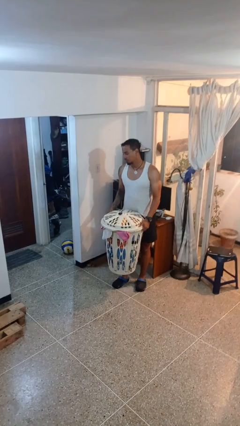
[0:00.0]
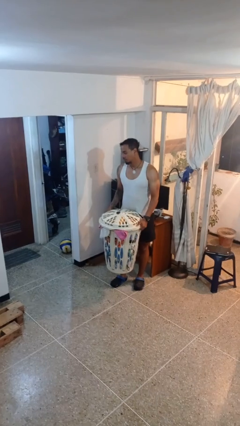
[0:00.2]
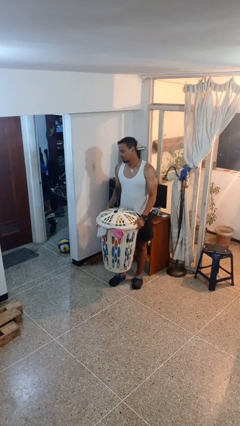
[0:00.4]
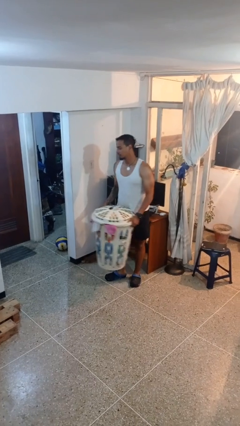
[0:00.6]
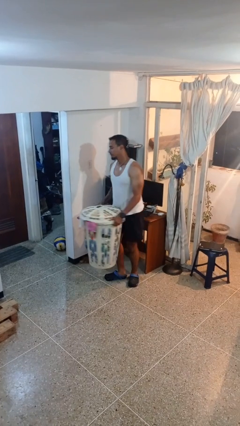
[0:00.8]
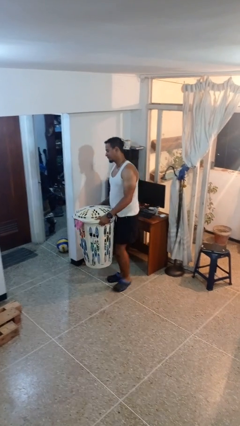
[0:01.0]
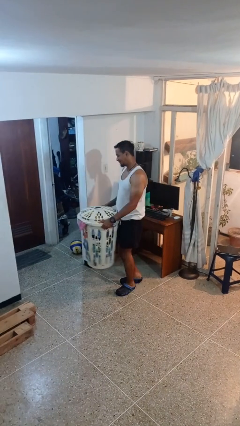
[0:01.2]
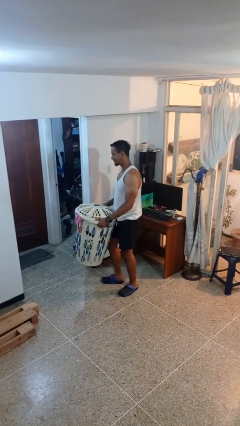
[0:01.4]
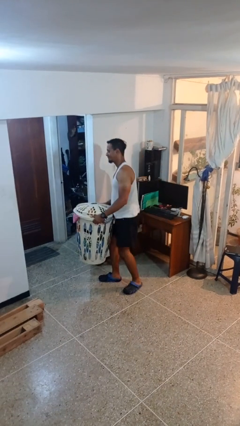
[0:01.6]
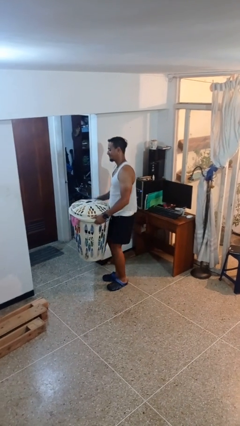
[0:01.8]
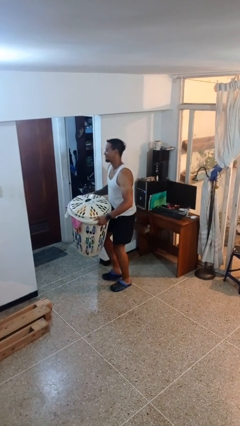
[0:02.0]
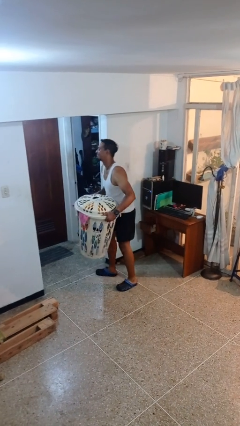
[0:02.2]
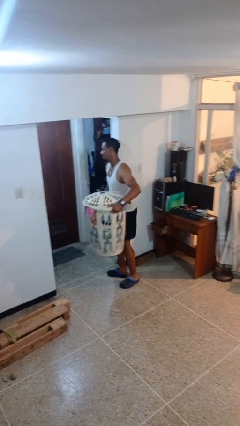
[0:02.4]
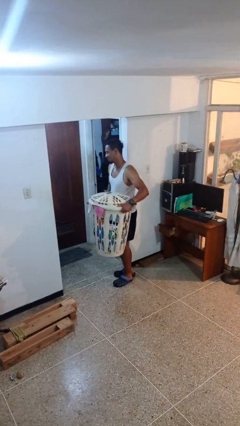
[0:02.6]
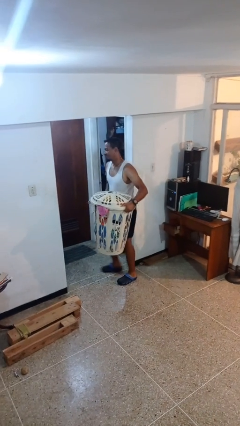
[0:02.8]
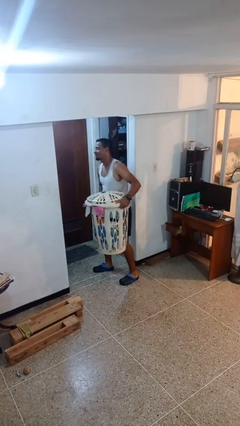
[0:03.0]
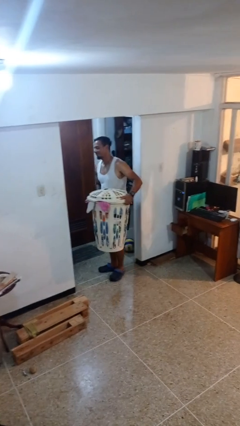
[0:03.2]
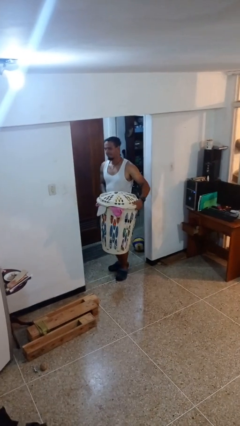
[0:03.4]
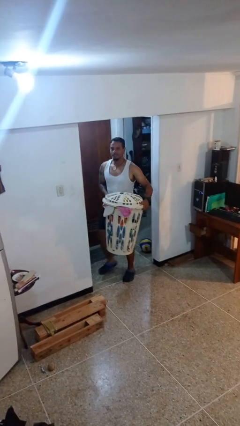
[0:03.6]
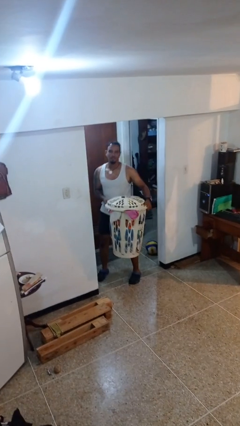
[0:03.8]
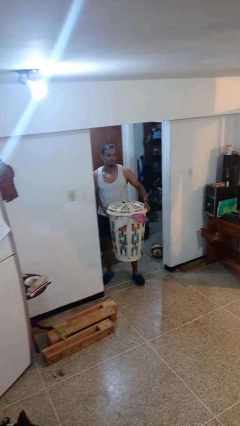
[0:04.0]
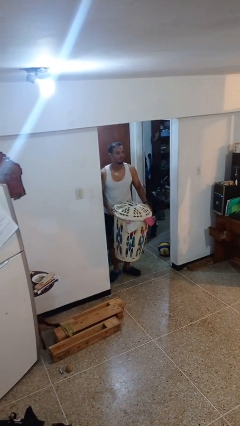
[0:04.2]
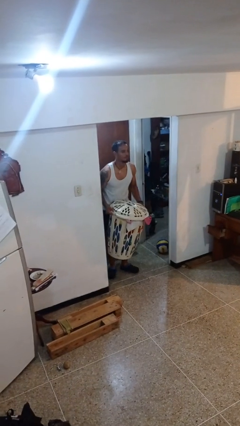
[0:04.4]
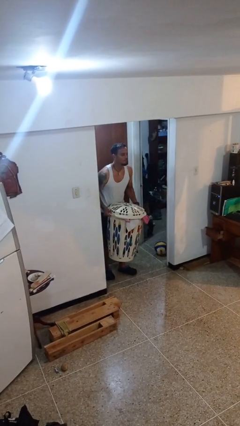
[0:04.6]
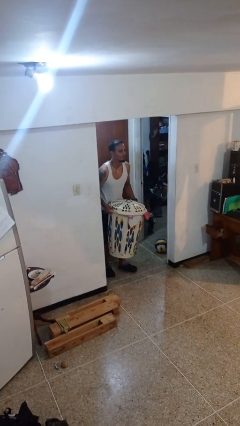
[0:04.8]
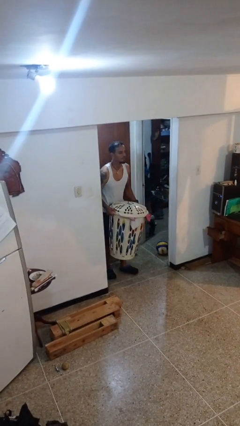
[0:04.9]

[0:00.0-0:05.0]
person carries laundry basket

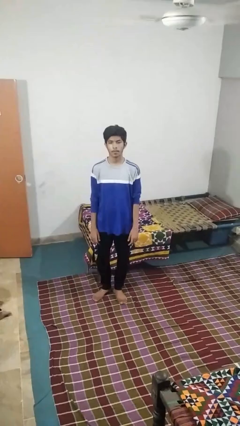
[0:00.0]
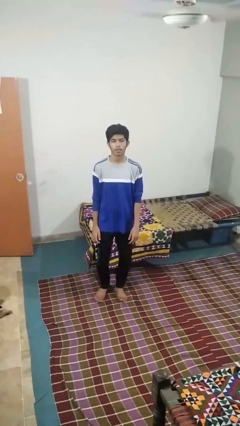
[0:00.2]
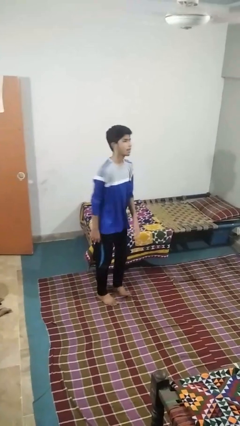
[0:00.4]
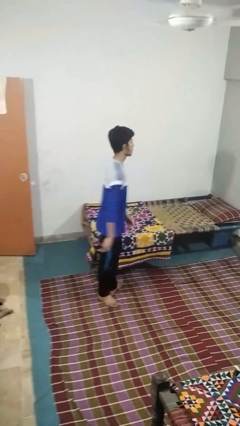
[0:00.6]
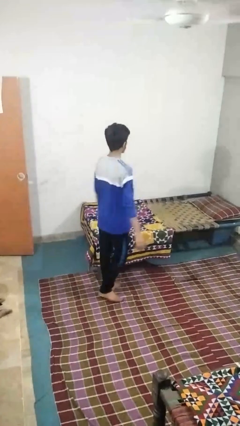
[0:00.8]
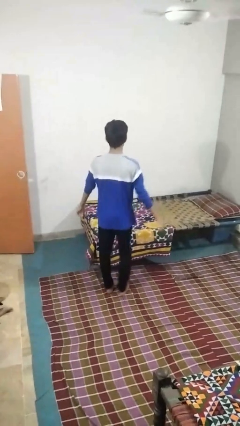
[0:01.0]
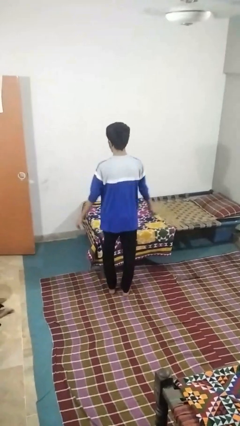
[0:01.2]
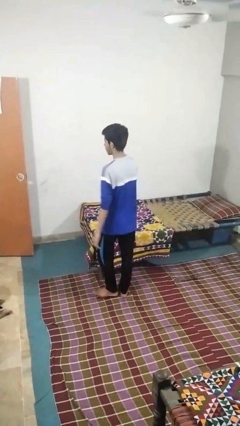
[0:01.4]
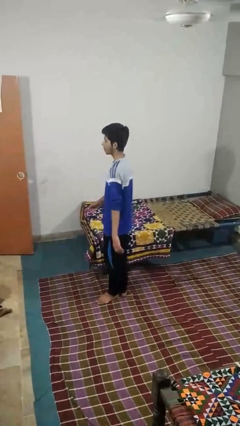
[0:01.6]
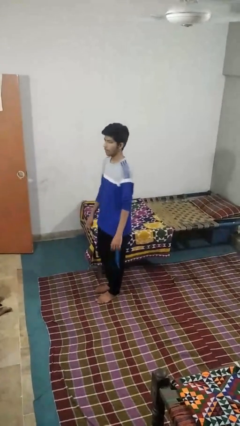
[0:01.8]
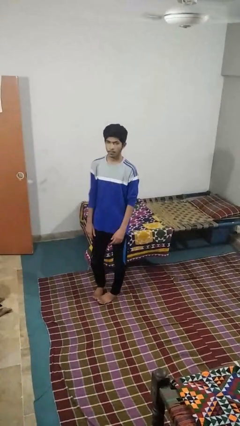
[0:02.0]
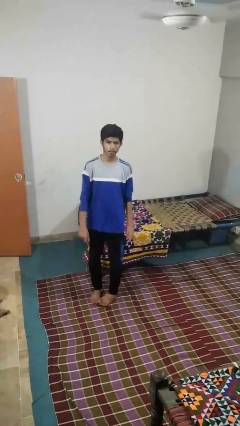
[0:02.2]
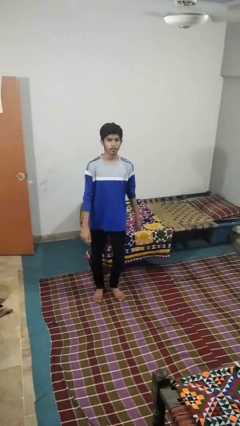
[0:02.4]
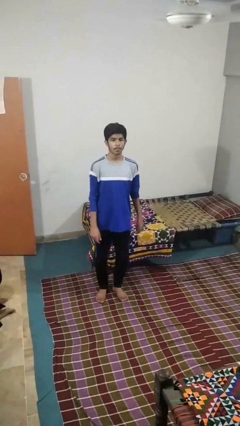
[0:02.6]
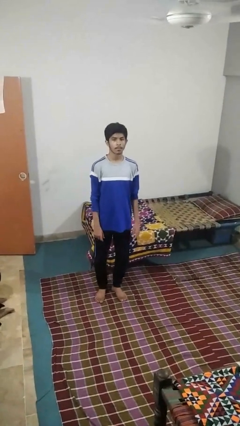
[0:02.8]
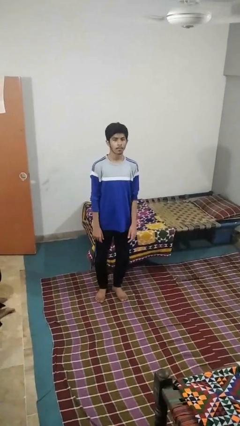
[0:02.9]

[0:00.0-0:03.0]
person twirls

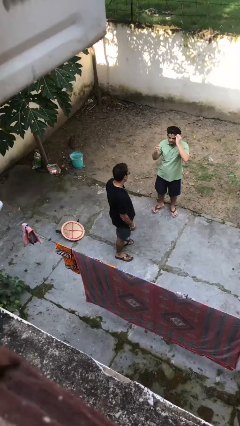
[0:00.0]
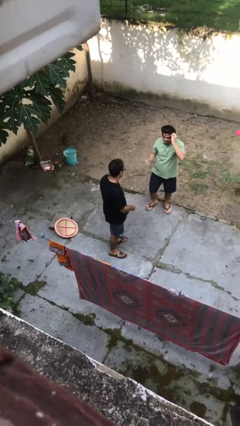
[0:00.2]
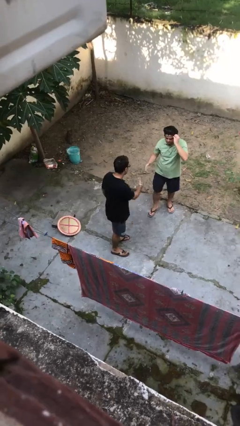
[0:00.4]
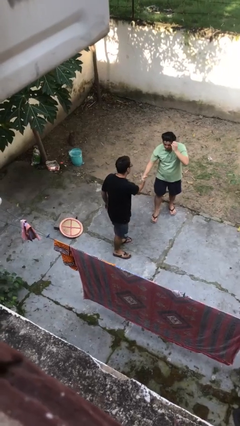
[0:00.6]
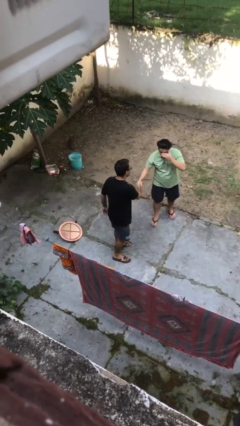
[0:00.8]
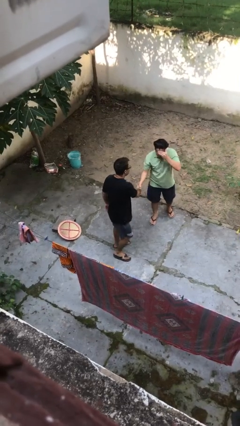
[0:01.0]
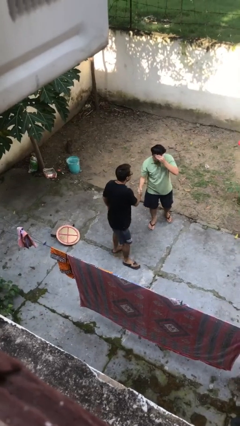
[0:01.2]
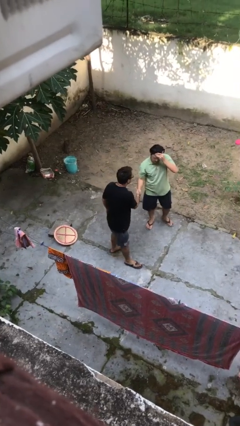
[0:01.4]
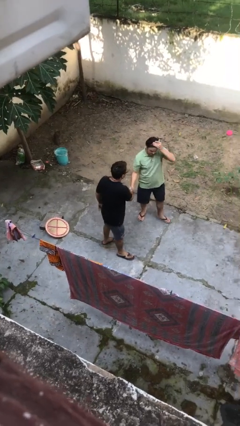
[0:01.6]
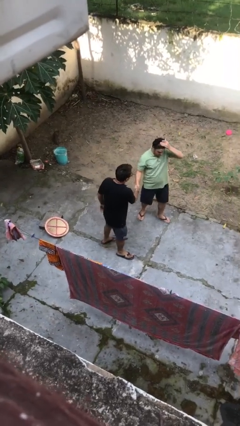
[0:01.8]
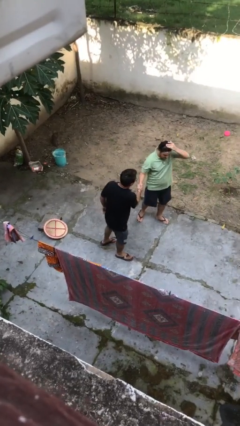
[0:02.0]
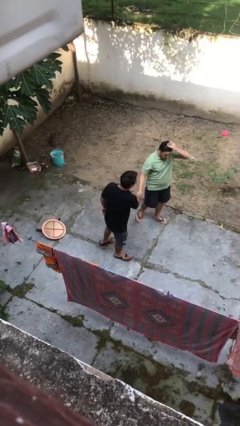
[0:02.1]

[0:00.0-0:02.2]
person shakes hand

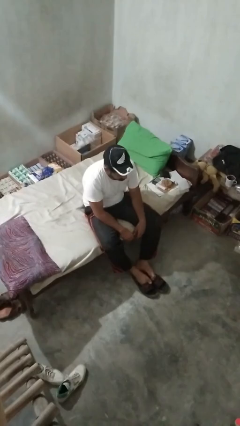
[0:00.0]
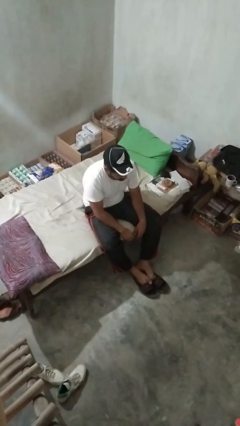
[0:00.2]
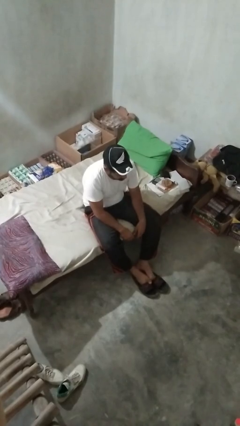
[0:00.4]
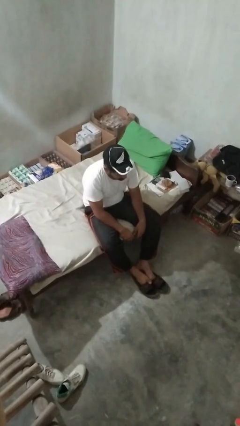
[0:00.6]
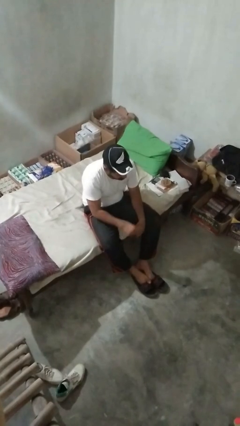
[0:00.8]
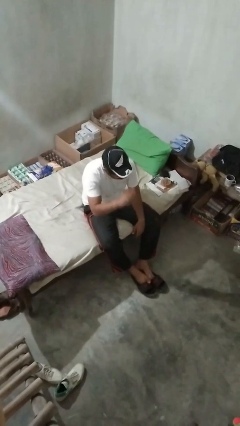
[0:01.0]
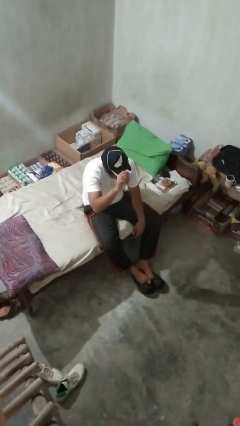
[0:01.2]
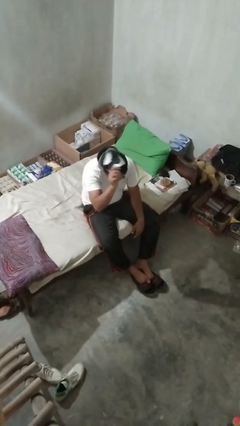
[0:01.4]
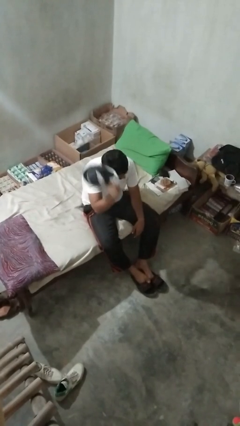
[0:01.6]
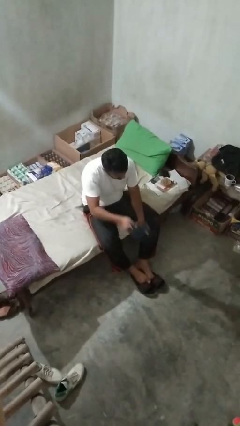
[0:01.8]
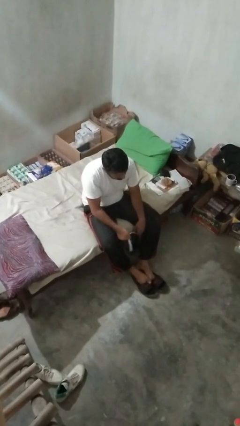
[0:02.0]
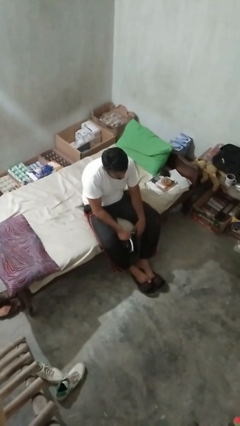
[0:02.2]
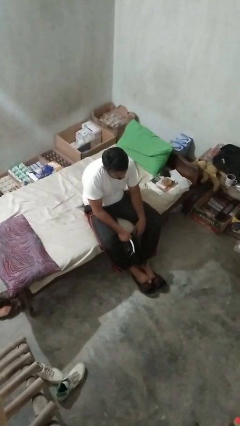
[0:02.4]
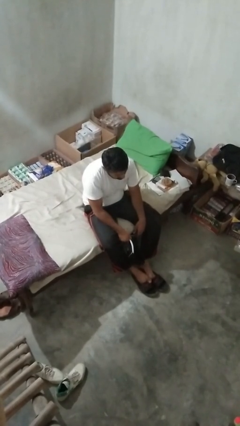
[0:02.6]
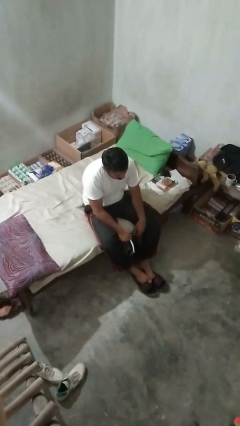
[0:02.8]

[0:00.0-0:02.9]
person takes off hat

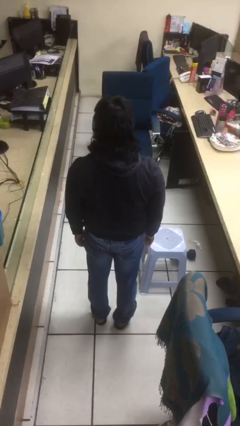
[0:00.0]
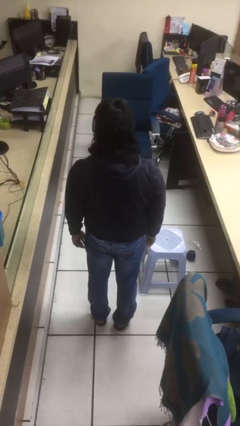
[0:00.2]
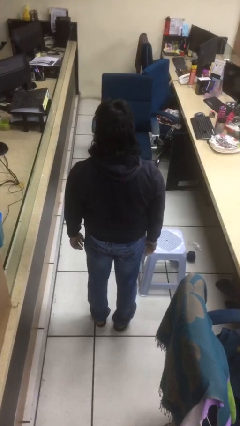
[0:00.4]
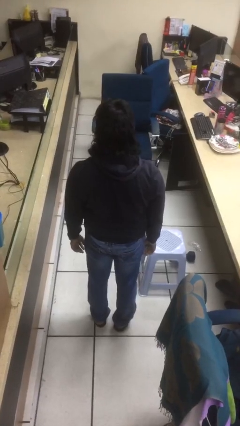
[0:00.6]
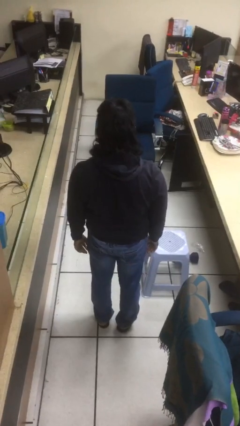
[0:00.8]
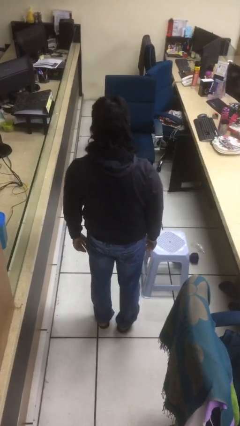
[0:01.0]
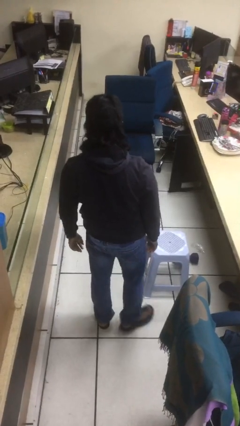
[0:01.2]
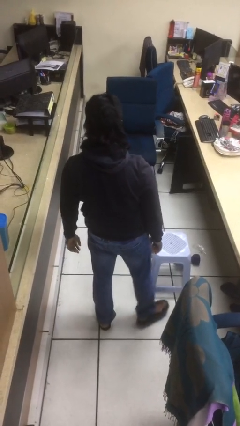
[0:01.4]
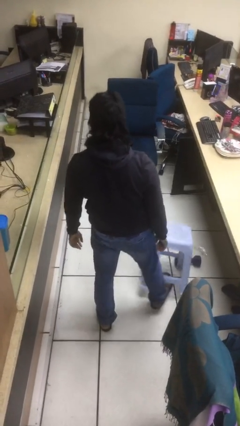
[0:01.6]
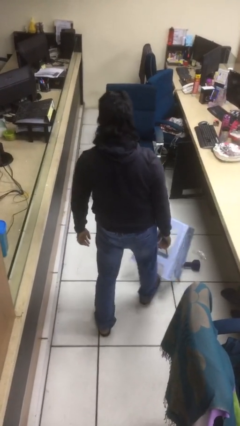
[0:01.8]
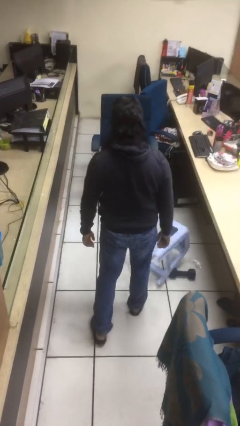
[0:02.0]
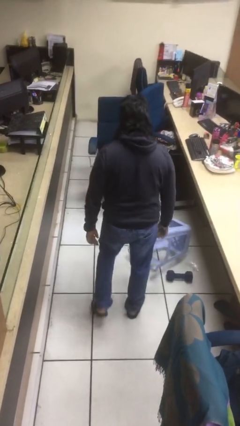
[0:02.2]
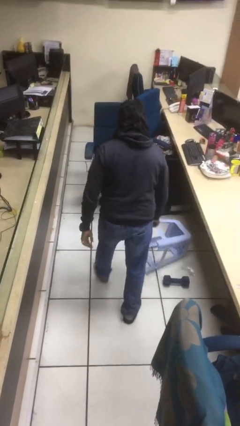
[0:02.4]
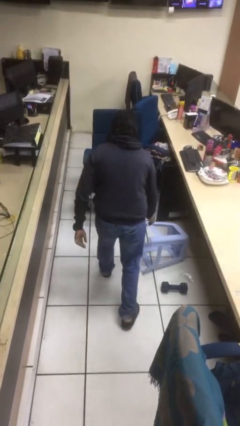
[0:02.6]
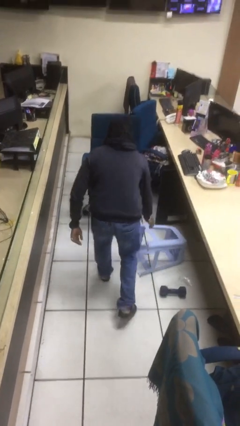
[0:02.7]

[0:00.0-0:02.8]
person knocks over furniture

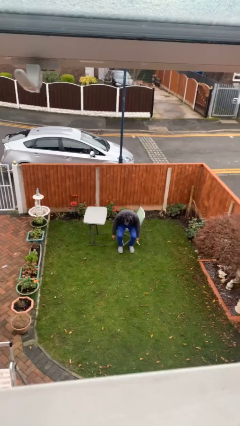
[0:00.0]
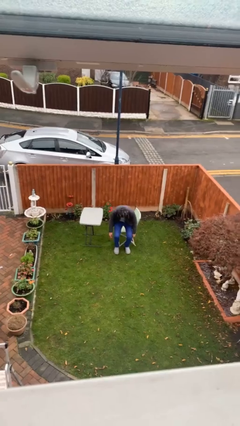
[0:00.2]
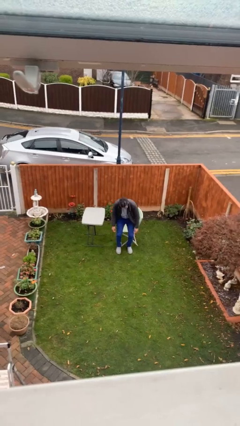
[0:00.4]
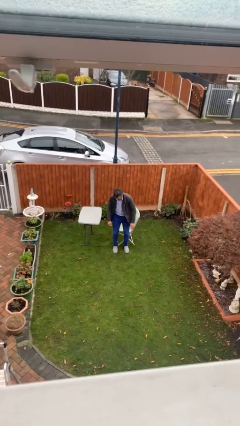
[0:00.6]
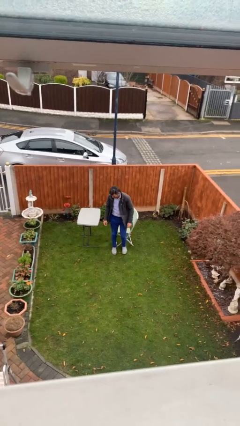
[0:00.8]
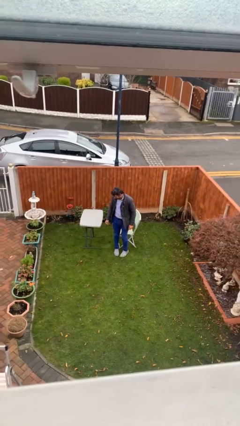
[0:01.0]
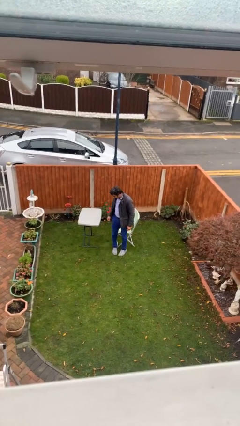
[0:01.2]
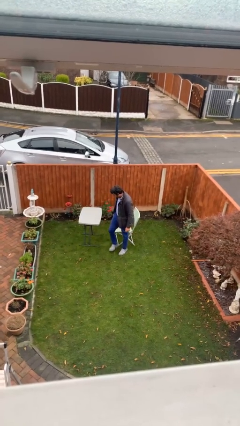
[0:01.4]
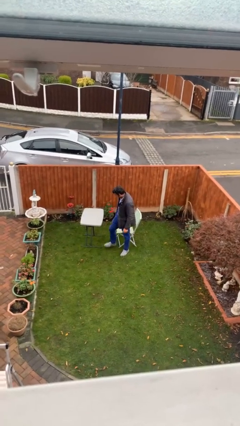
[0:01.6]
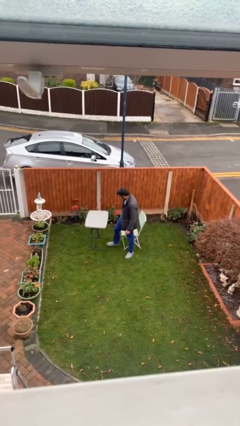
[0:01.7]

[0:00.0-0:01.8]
person stands up
